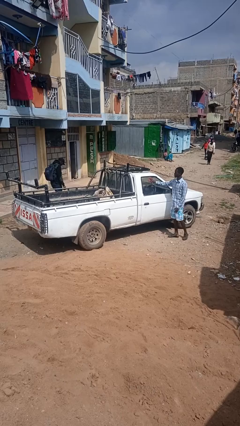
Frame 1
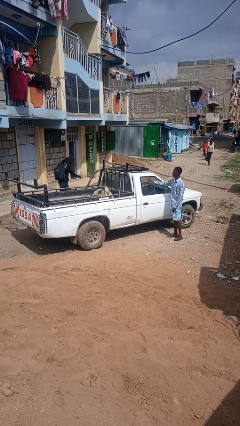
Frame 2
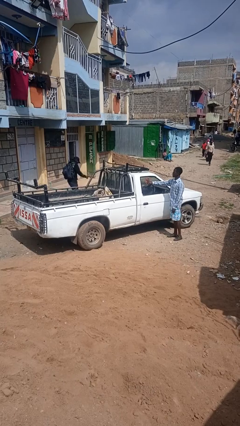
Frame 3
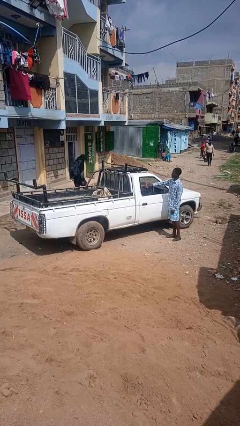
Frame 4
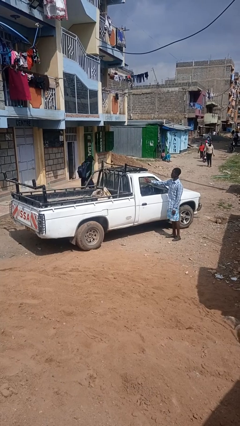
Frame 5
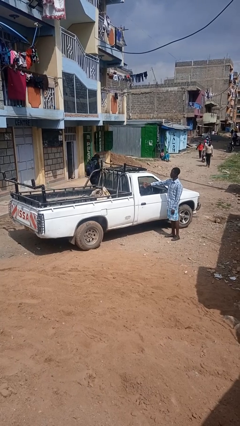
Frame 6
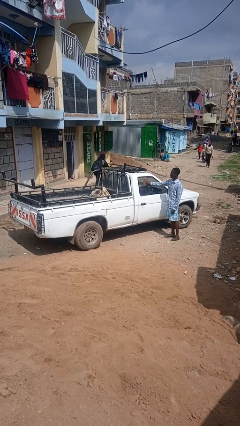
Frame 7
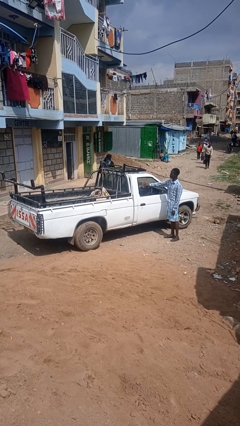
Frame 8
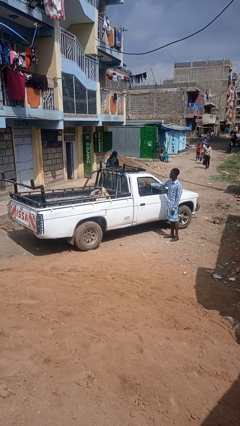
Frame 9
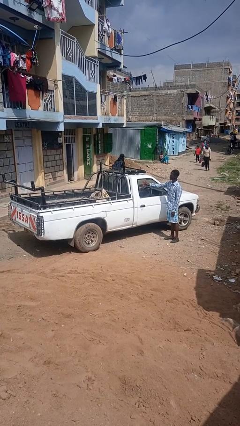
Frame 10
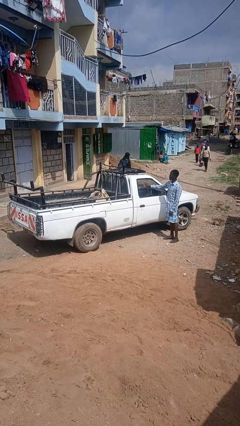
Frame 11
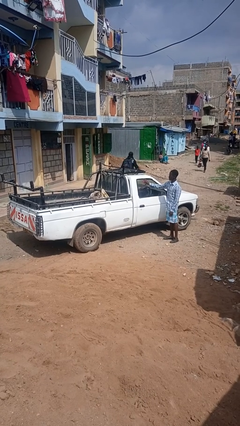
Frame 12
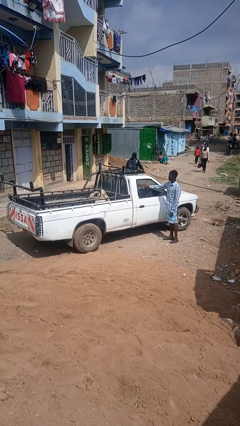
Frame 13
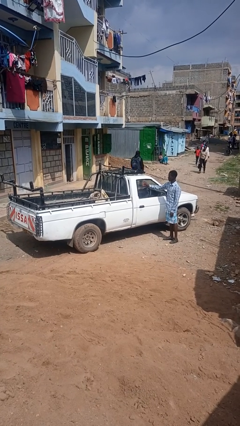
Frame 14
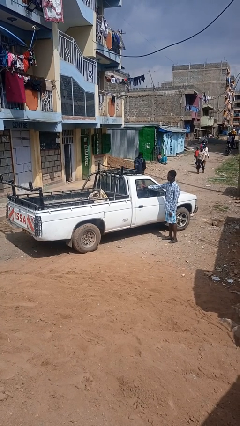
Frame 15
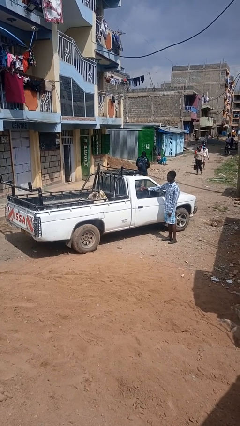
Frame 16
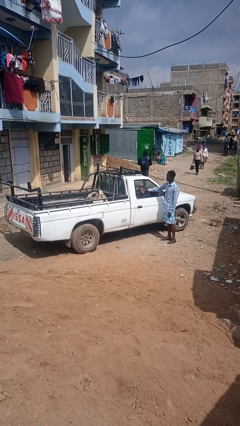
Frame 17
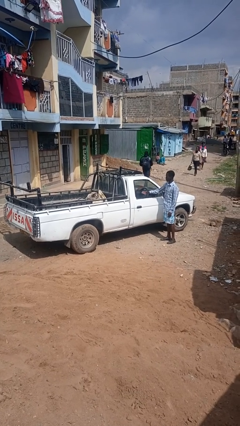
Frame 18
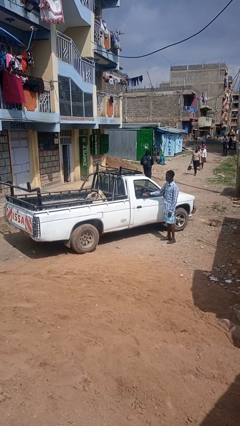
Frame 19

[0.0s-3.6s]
person polishes car with rag

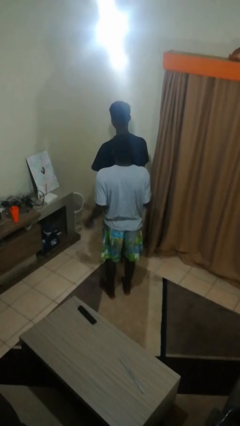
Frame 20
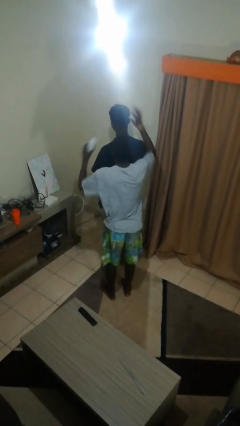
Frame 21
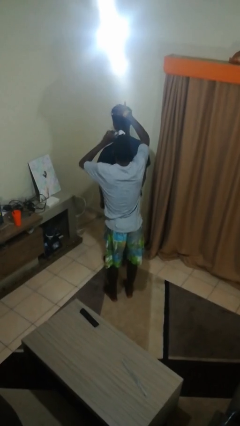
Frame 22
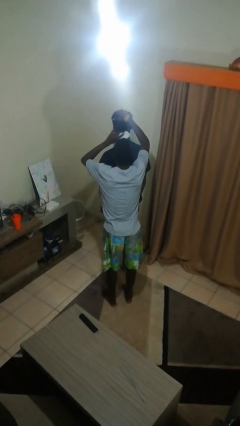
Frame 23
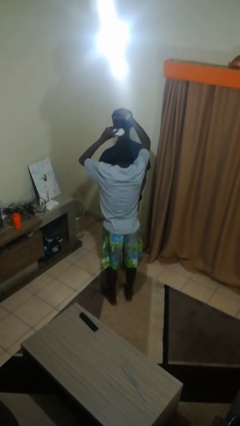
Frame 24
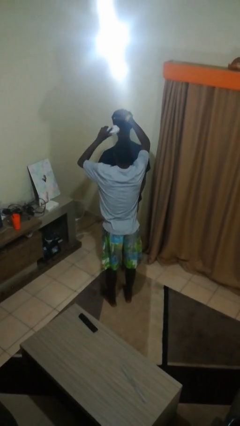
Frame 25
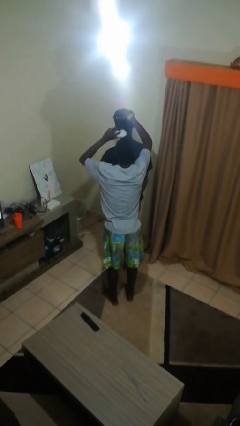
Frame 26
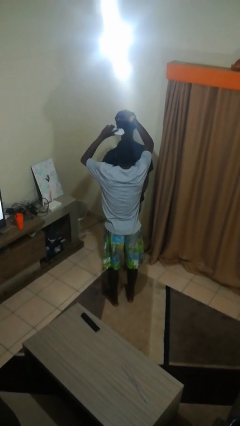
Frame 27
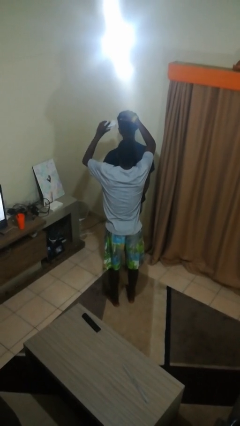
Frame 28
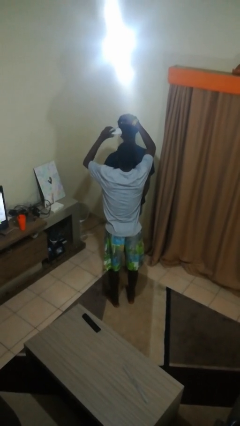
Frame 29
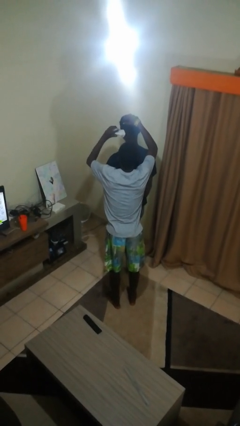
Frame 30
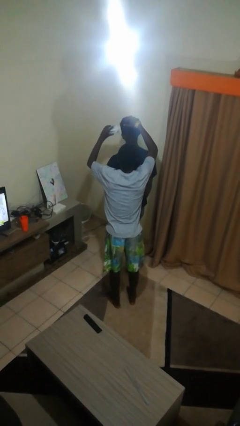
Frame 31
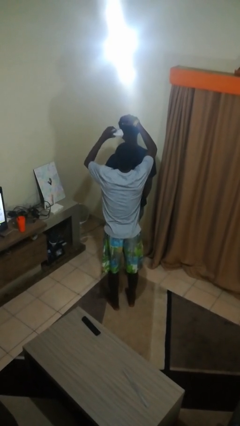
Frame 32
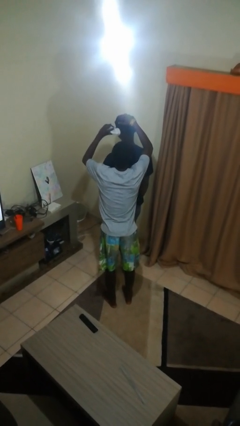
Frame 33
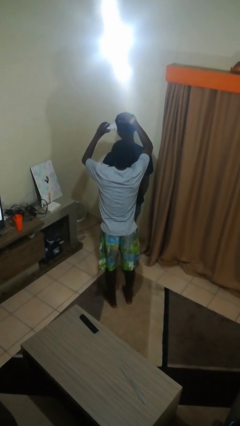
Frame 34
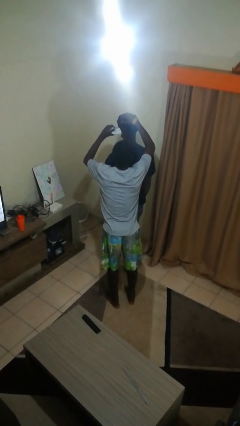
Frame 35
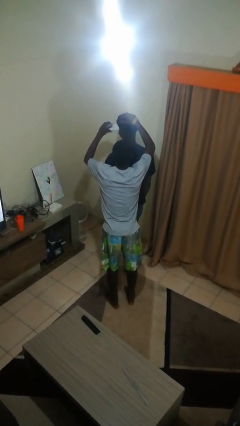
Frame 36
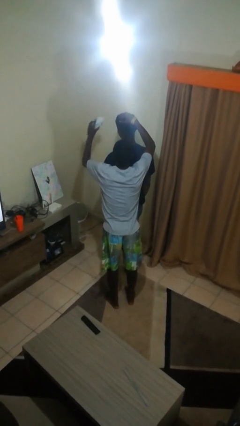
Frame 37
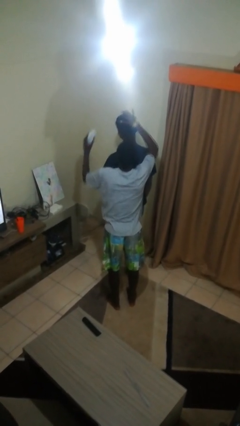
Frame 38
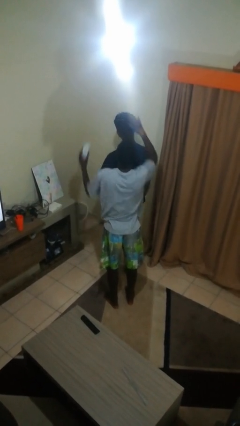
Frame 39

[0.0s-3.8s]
person brushes hair of person

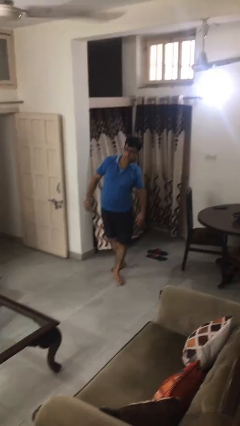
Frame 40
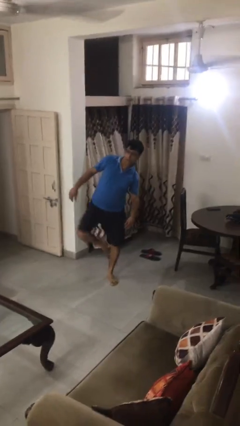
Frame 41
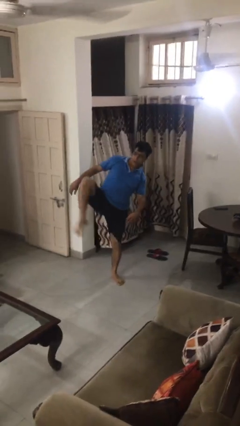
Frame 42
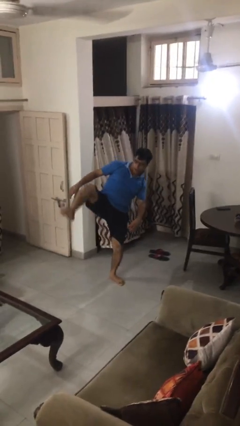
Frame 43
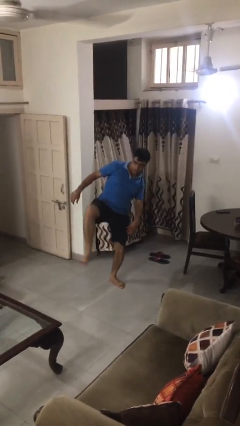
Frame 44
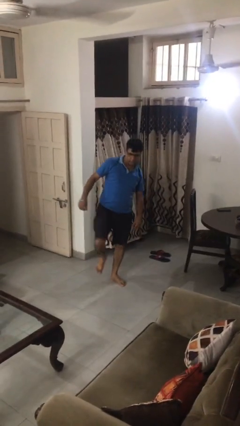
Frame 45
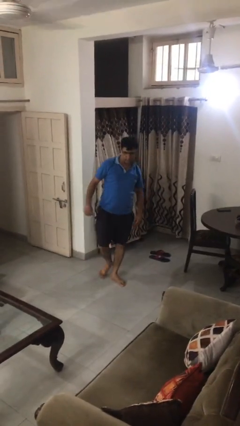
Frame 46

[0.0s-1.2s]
person karate kicks

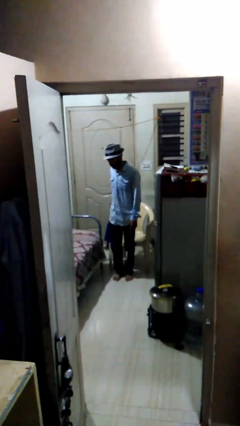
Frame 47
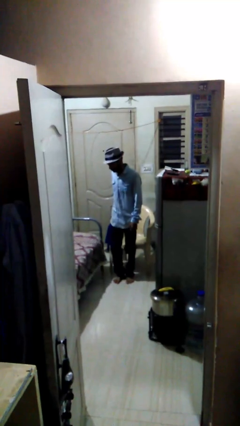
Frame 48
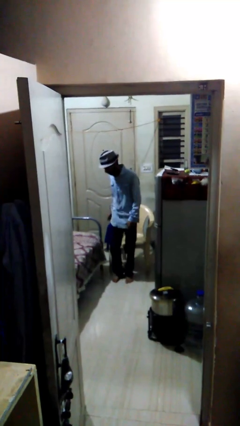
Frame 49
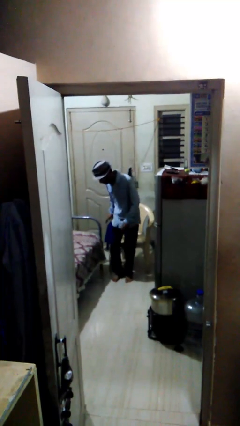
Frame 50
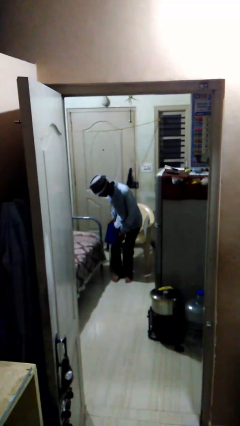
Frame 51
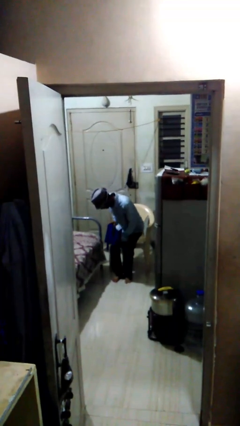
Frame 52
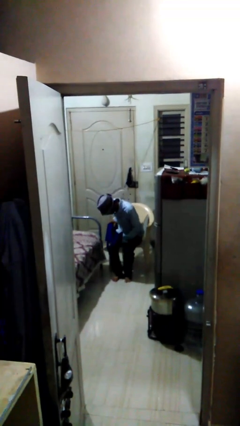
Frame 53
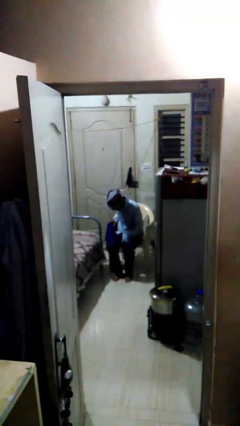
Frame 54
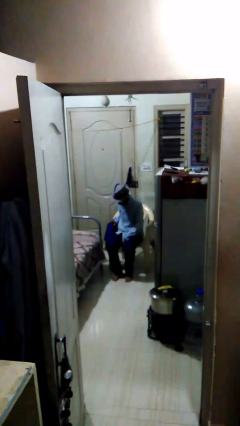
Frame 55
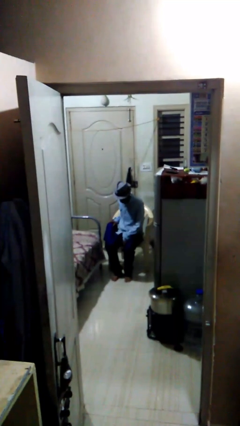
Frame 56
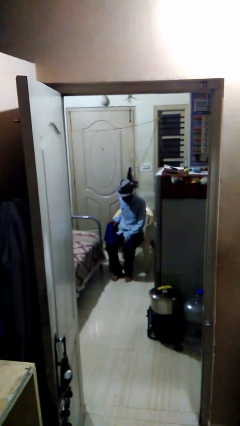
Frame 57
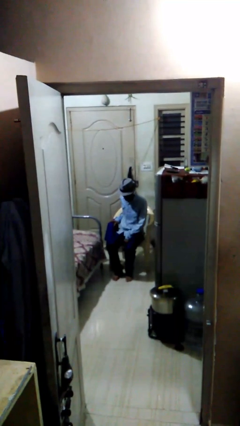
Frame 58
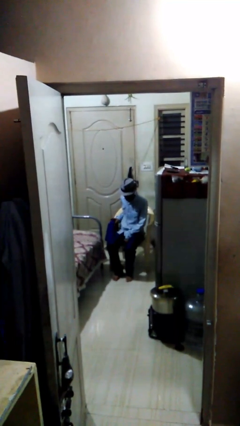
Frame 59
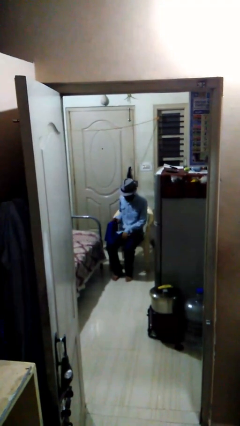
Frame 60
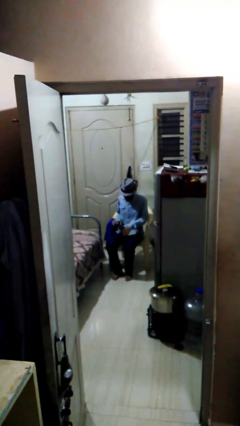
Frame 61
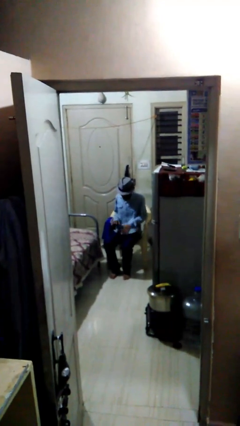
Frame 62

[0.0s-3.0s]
person sits down

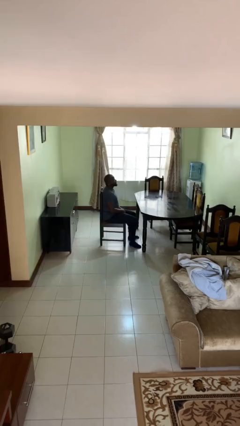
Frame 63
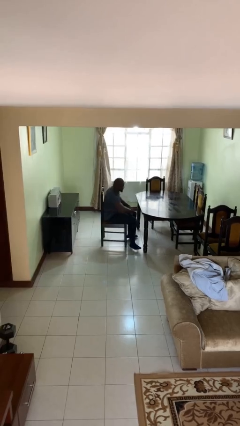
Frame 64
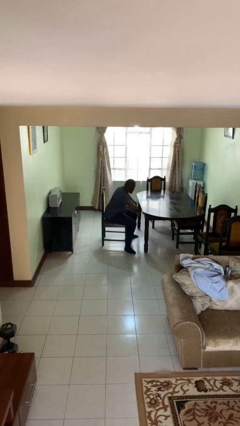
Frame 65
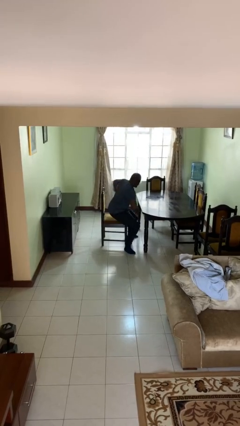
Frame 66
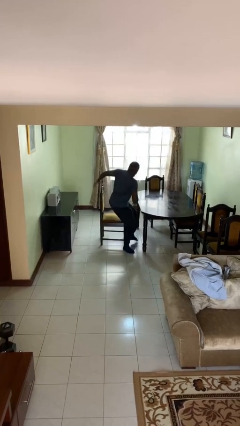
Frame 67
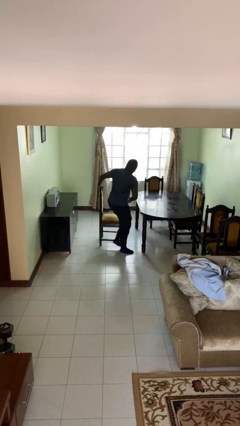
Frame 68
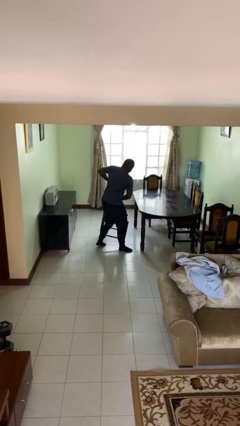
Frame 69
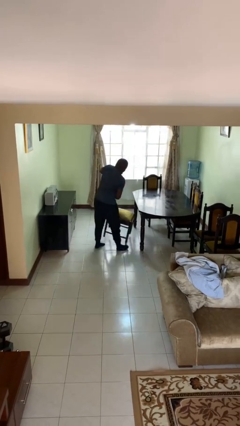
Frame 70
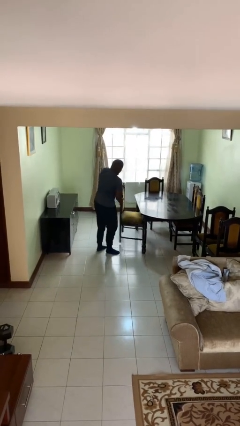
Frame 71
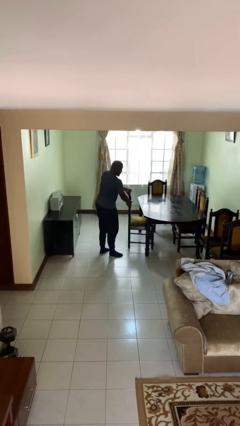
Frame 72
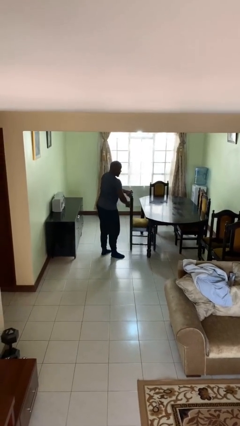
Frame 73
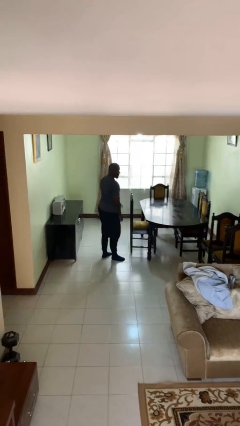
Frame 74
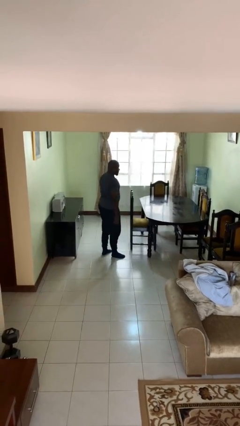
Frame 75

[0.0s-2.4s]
person stands up

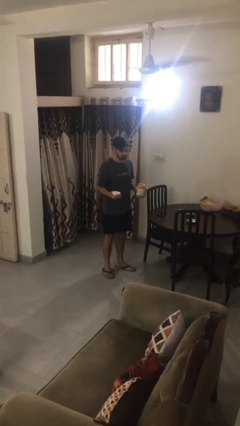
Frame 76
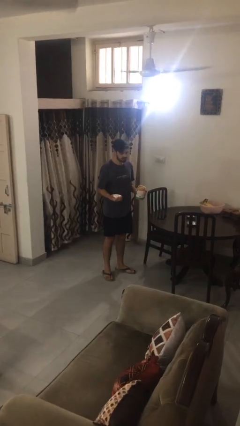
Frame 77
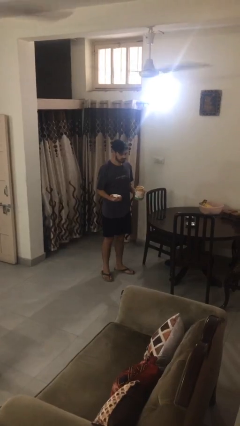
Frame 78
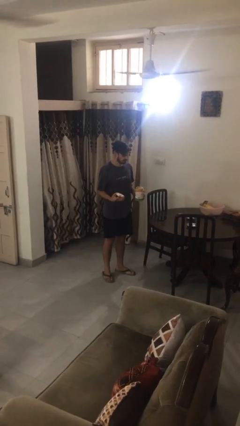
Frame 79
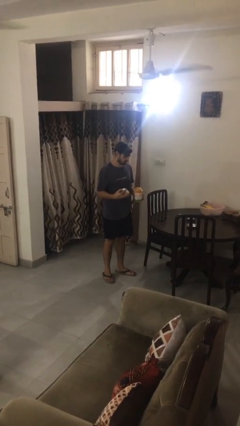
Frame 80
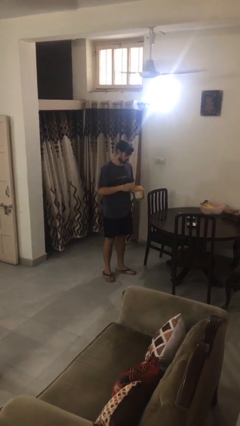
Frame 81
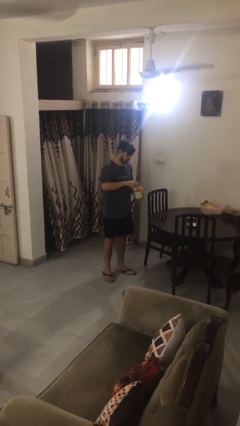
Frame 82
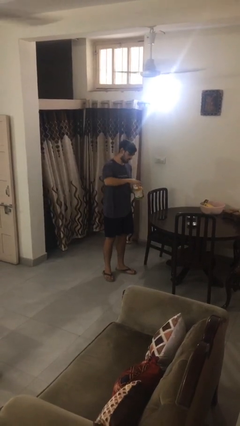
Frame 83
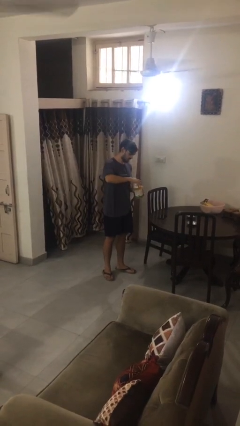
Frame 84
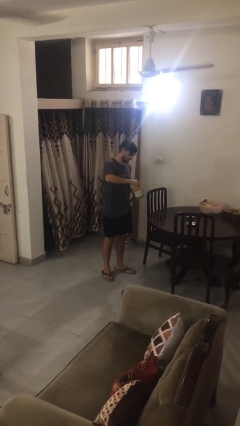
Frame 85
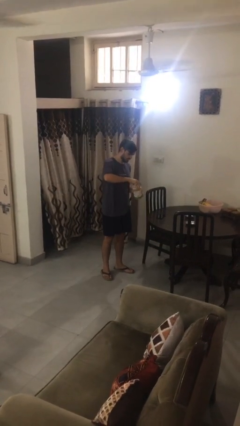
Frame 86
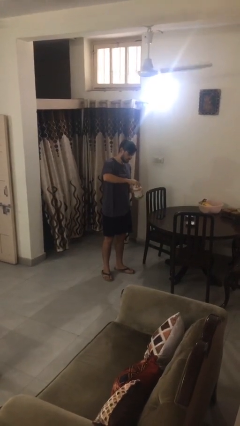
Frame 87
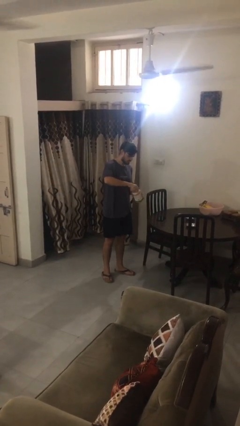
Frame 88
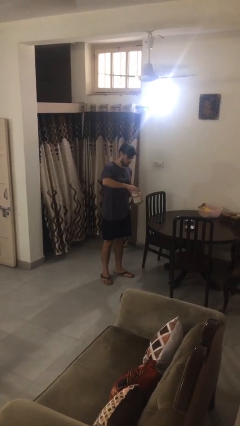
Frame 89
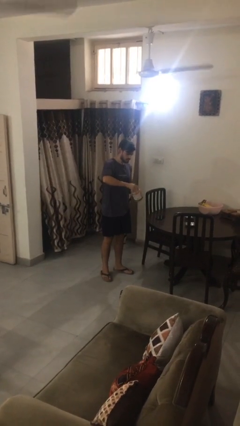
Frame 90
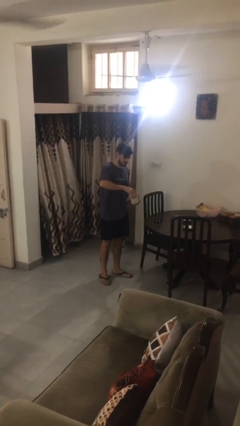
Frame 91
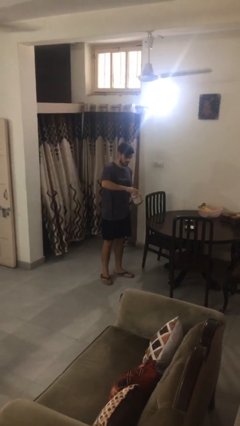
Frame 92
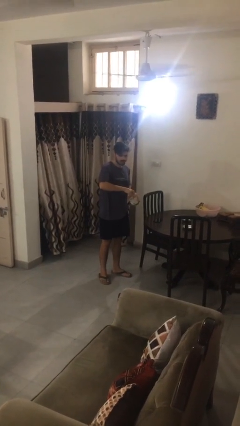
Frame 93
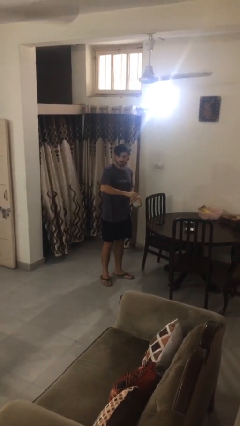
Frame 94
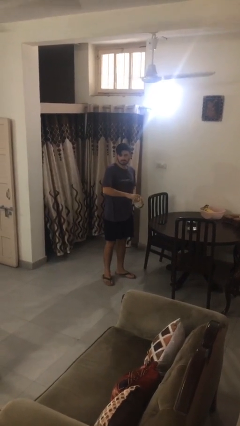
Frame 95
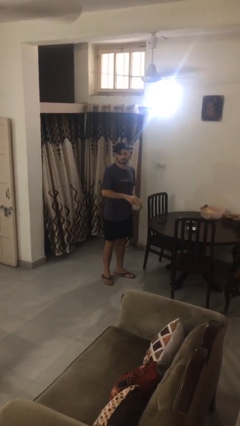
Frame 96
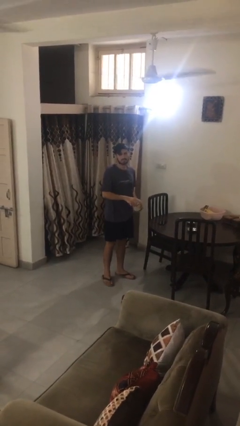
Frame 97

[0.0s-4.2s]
person closes jar
